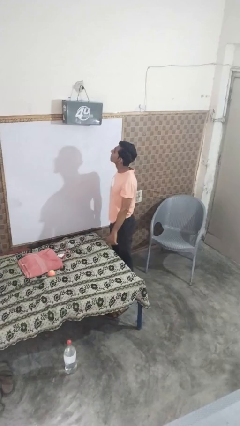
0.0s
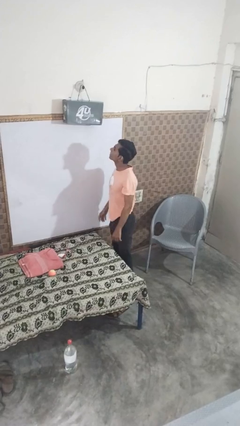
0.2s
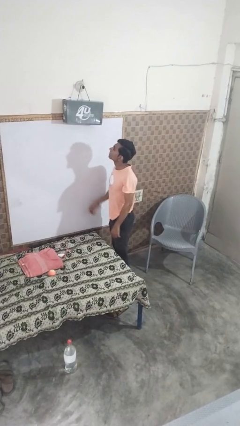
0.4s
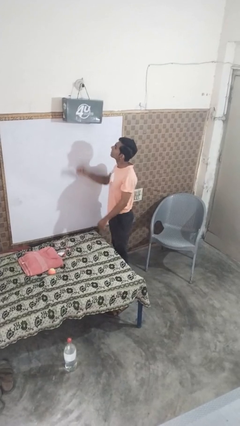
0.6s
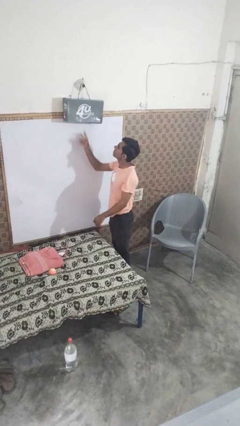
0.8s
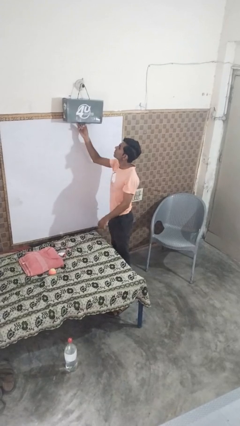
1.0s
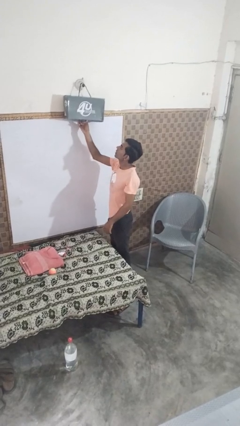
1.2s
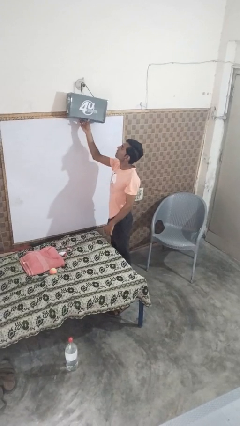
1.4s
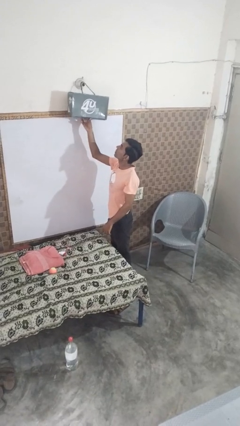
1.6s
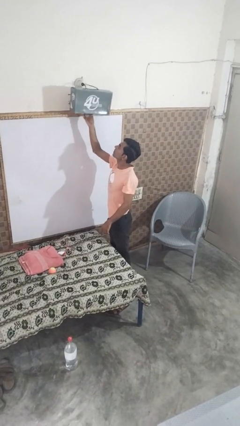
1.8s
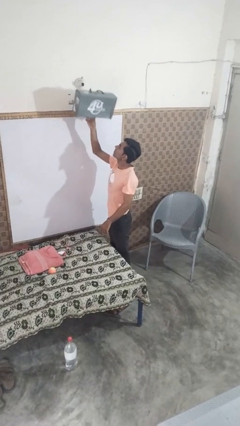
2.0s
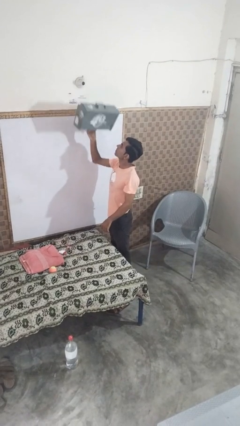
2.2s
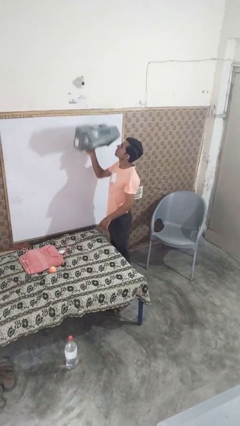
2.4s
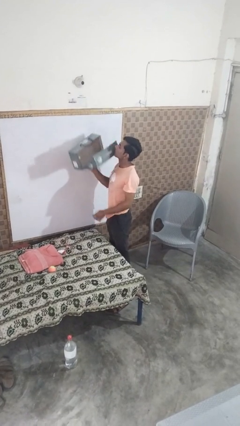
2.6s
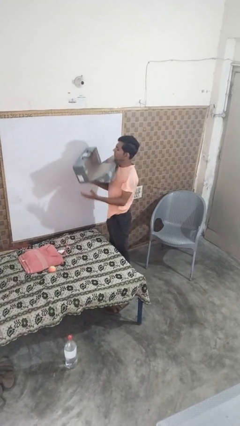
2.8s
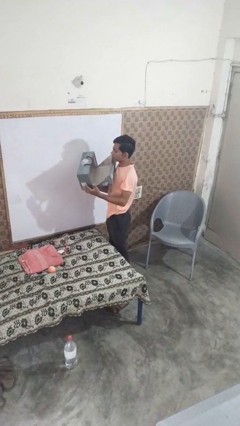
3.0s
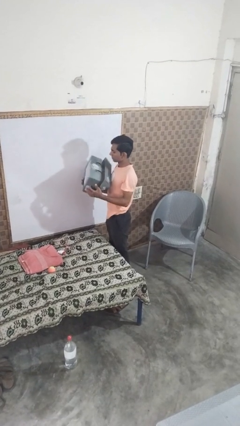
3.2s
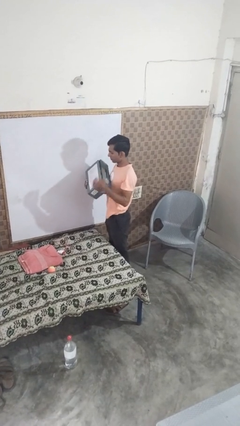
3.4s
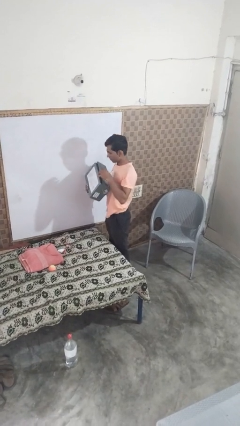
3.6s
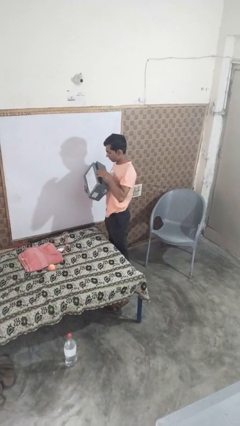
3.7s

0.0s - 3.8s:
person takes down smoke detector

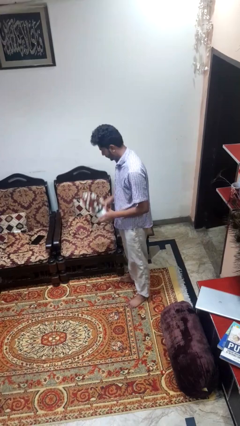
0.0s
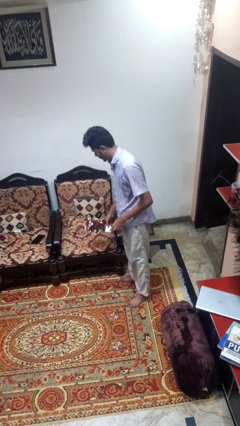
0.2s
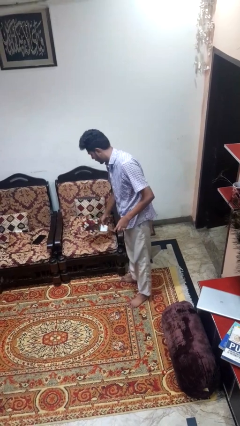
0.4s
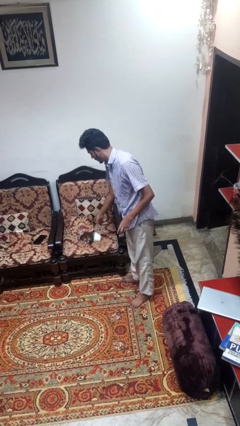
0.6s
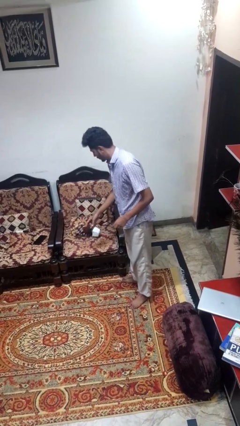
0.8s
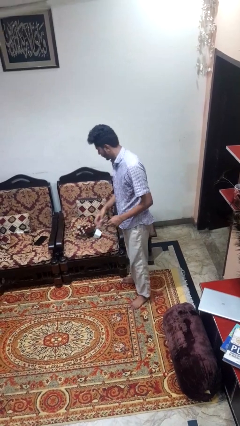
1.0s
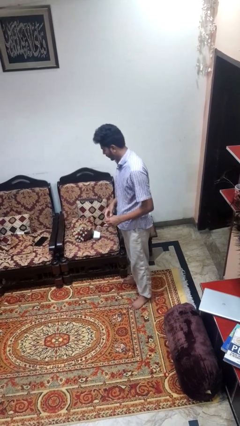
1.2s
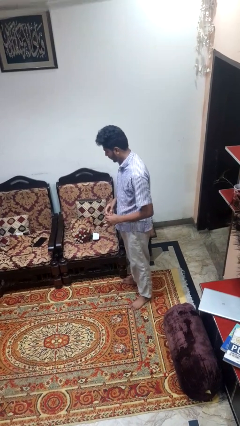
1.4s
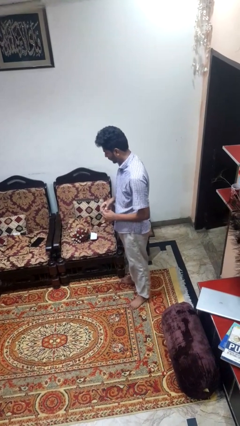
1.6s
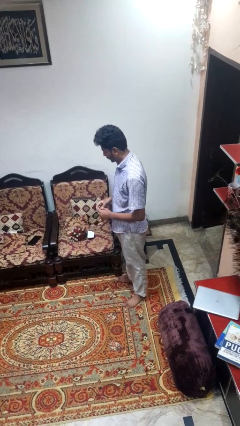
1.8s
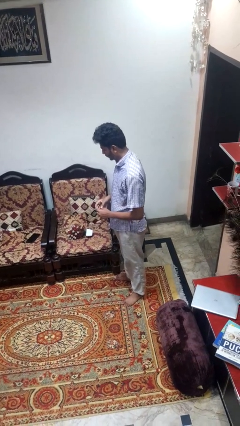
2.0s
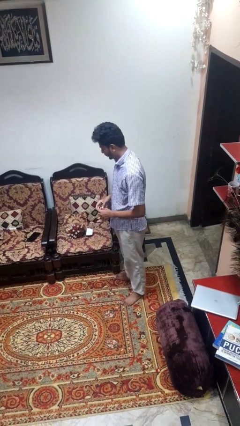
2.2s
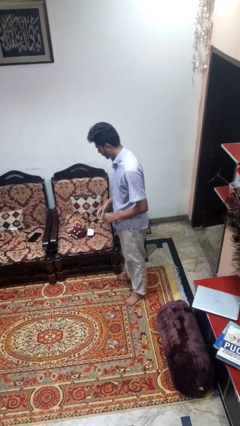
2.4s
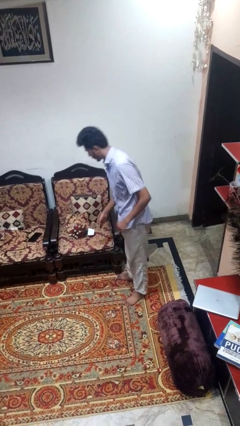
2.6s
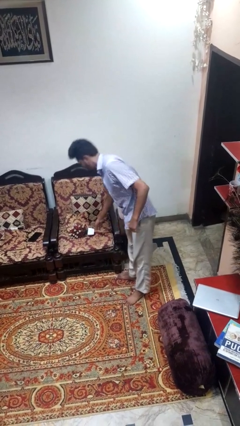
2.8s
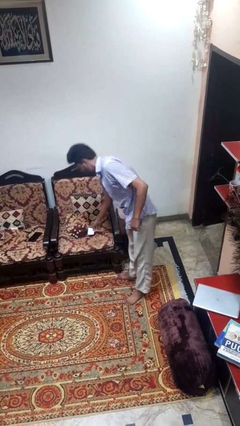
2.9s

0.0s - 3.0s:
person puts down object on couch

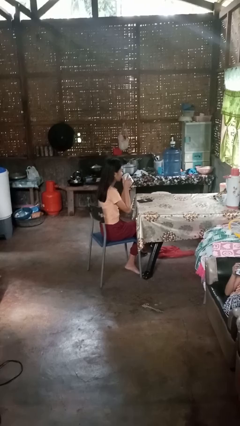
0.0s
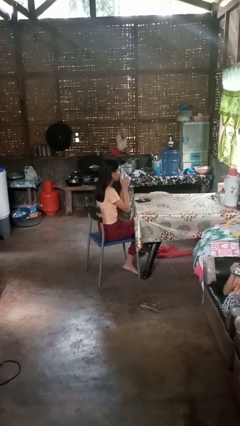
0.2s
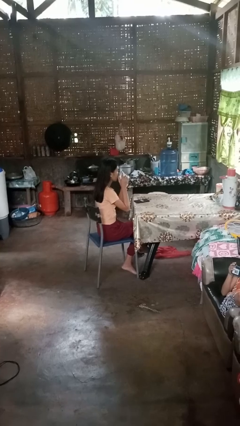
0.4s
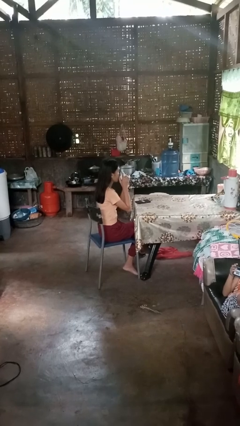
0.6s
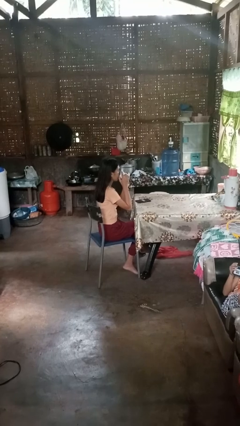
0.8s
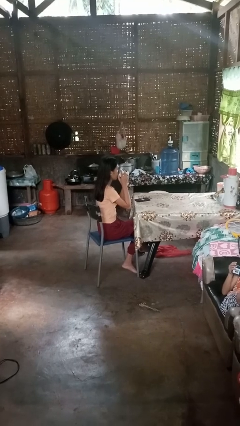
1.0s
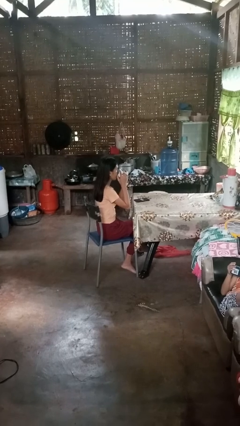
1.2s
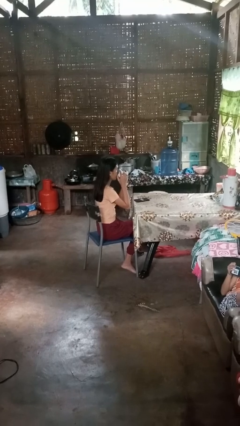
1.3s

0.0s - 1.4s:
person drinks from mug

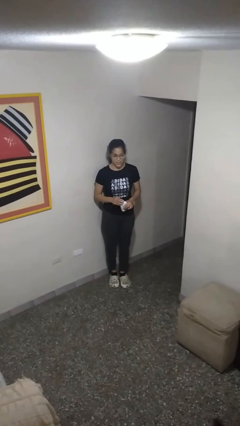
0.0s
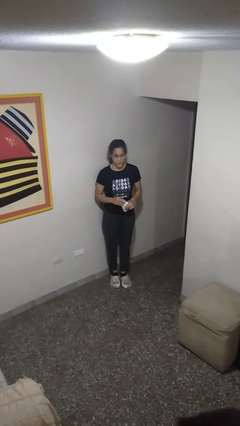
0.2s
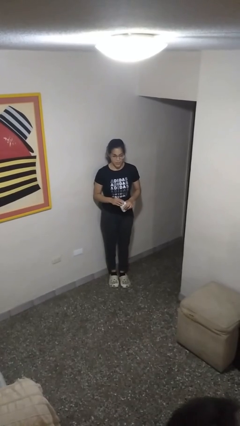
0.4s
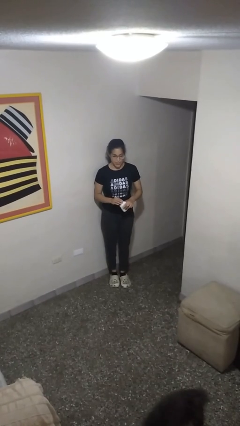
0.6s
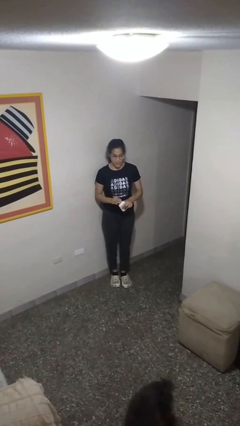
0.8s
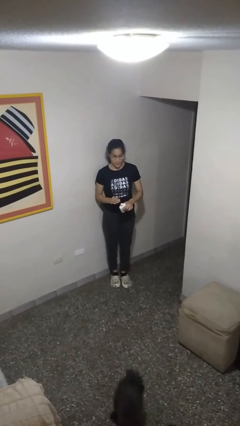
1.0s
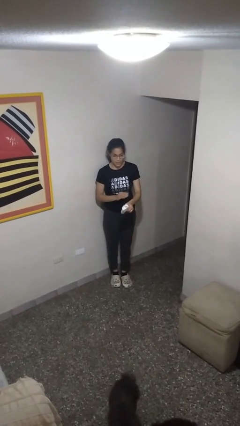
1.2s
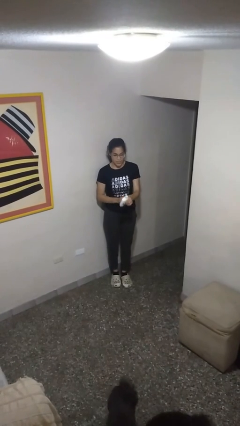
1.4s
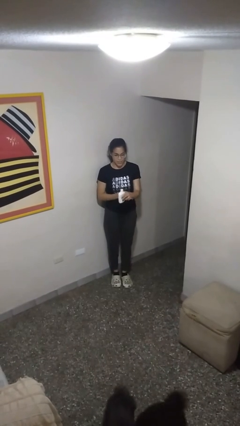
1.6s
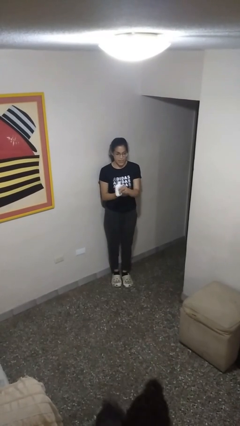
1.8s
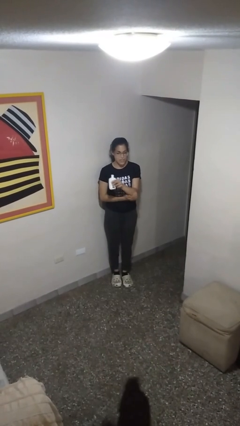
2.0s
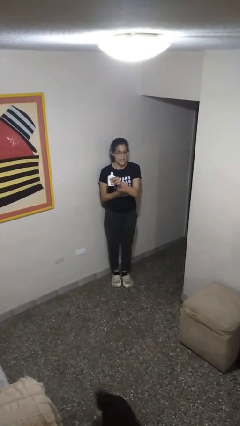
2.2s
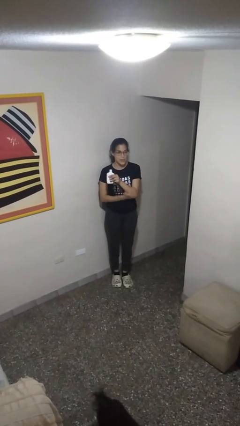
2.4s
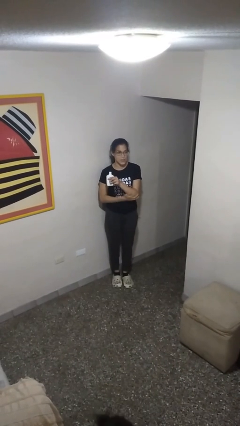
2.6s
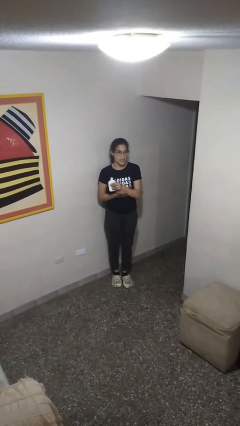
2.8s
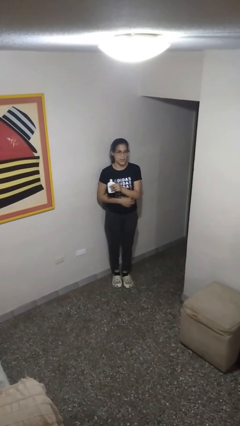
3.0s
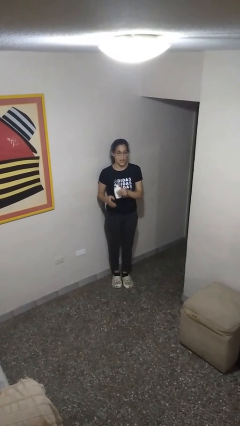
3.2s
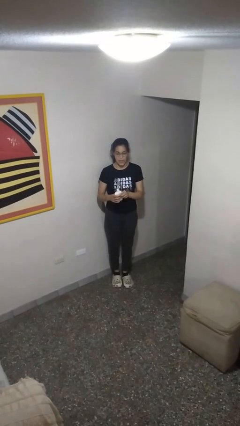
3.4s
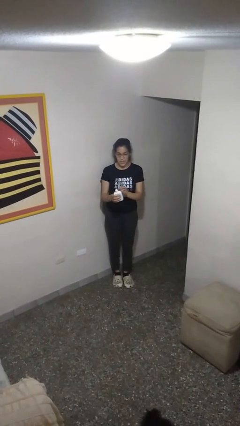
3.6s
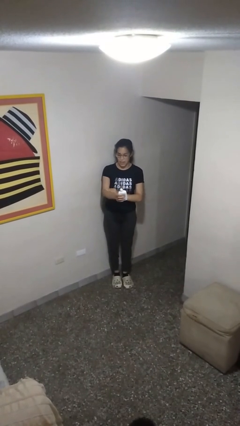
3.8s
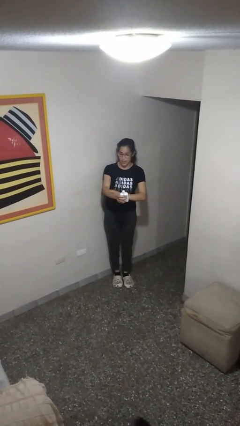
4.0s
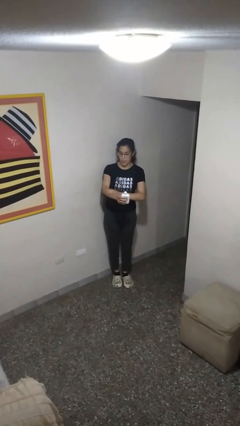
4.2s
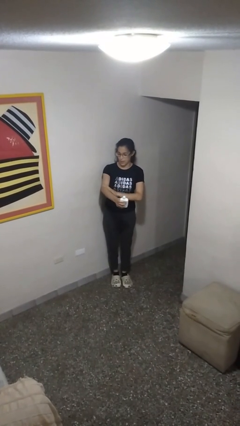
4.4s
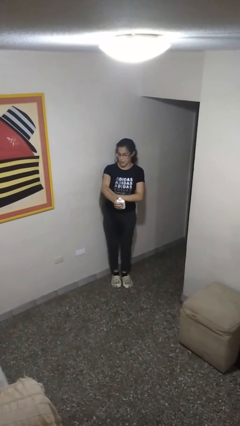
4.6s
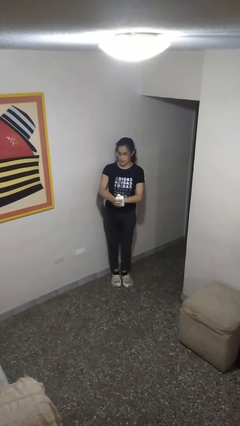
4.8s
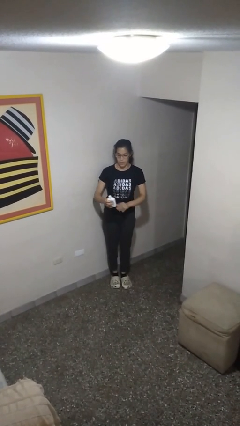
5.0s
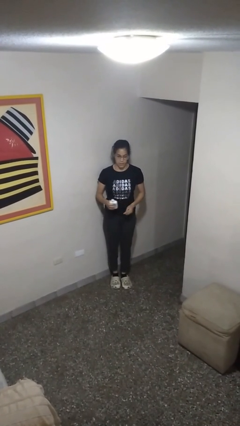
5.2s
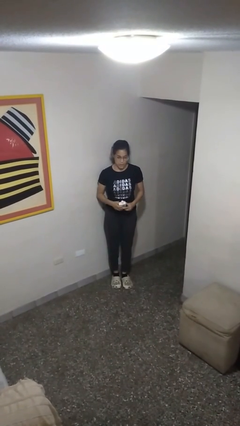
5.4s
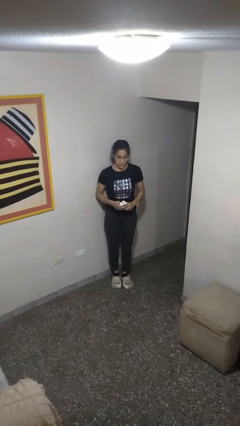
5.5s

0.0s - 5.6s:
person applies sunscreen

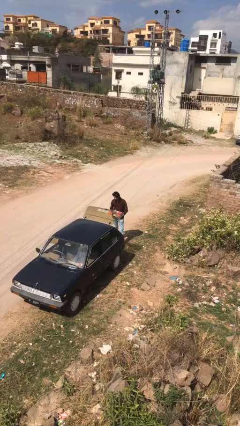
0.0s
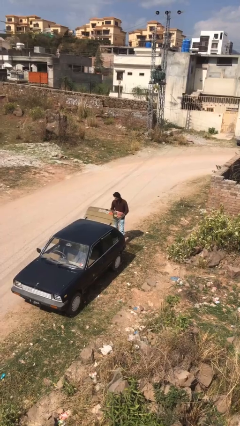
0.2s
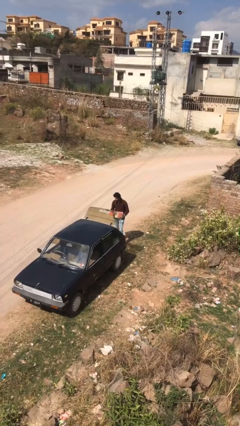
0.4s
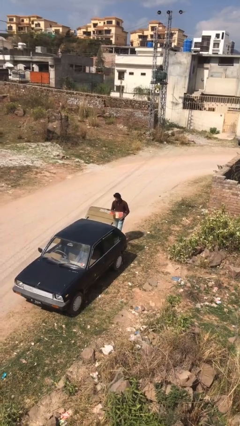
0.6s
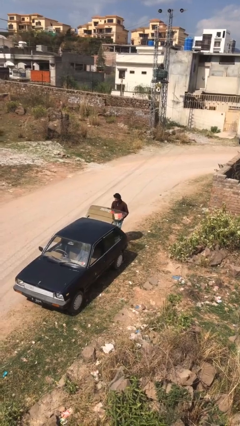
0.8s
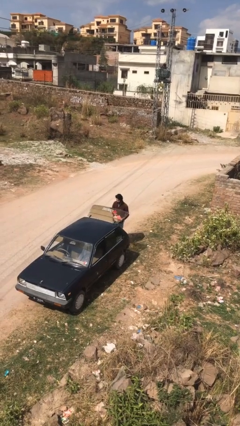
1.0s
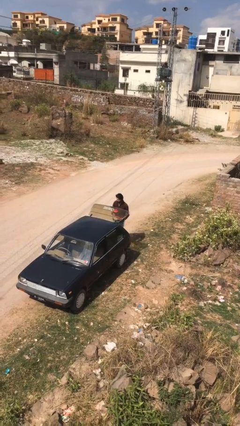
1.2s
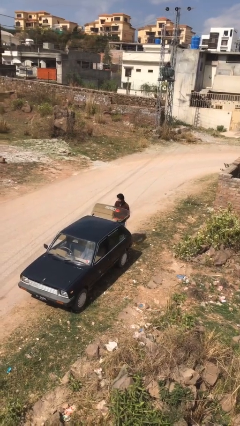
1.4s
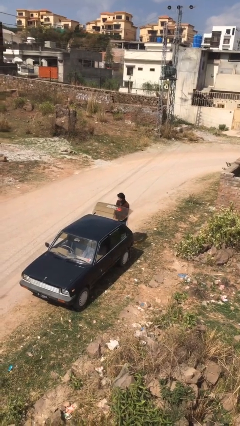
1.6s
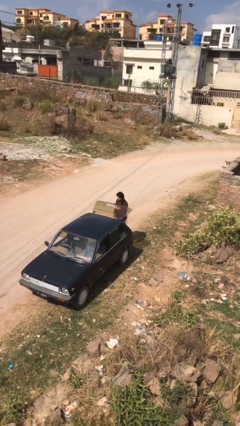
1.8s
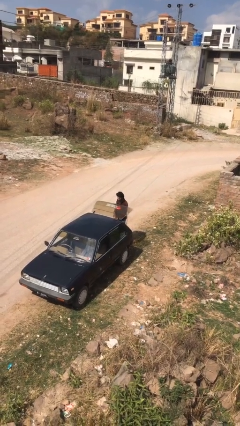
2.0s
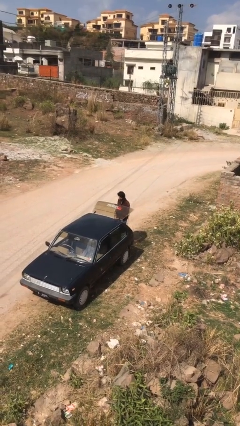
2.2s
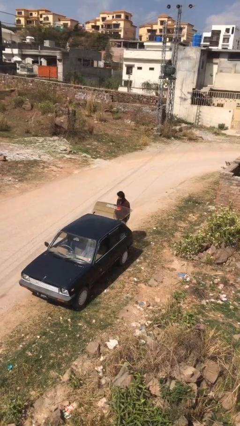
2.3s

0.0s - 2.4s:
person loads car

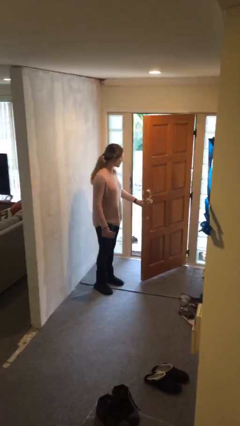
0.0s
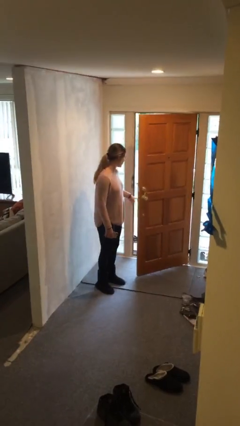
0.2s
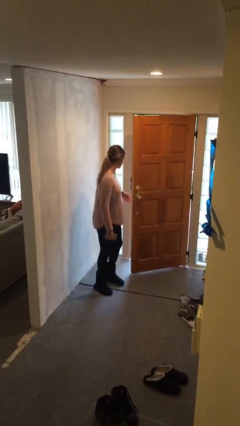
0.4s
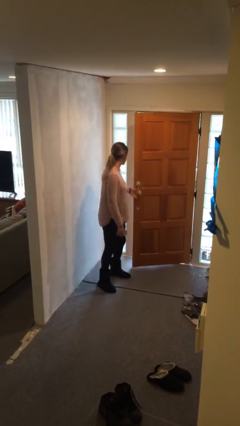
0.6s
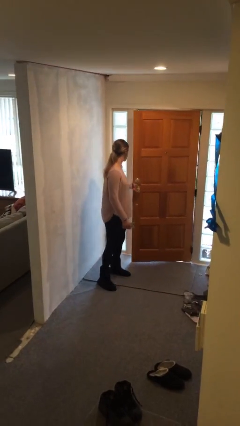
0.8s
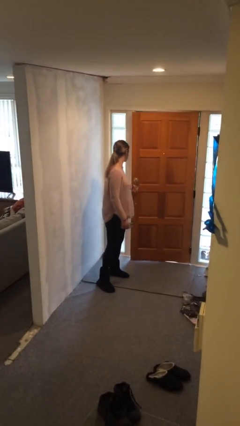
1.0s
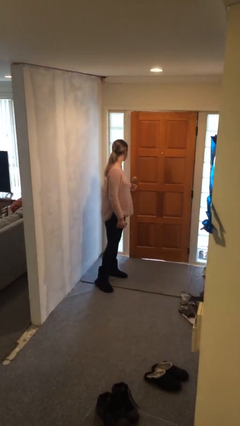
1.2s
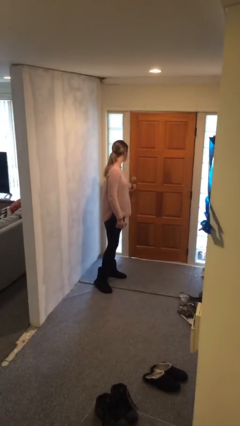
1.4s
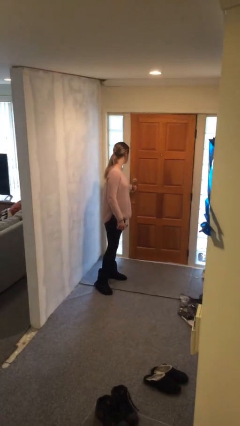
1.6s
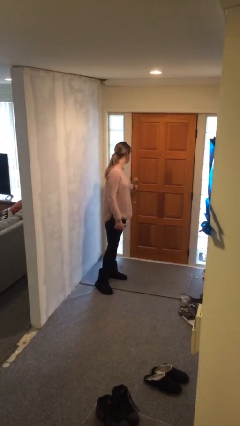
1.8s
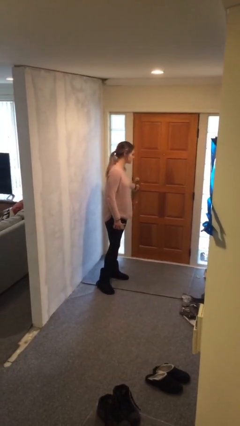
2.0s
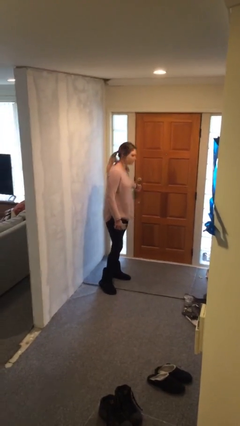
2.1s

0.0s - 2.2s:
person closes facility door
